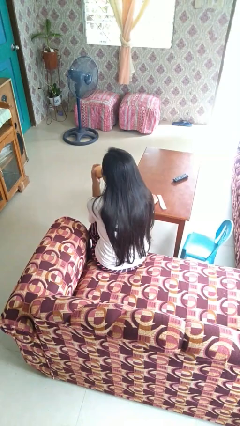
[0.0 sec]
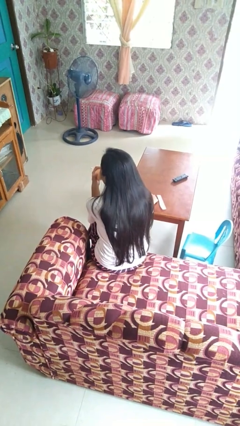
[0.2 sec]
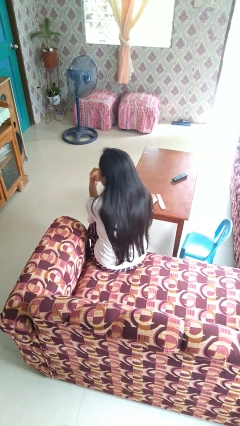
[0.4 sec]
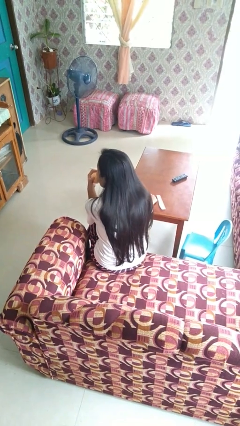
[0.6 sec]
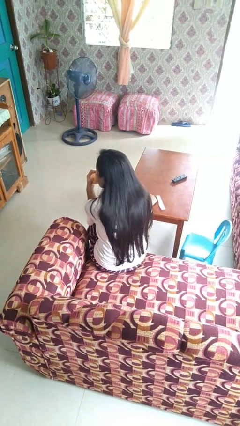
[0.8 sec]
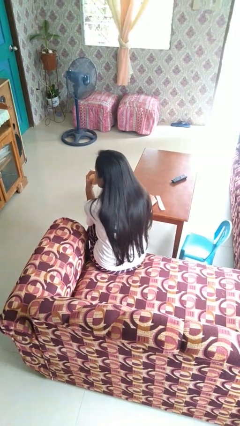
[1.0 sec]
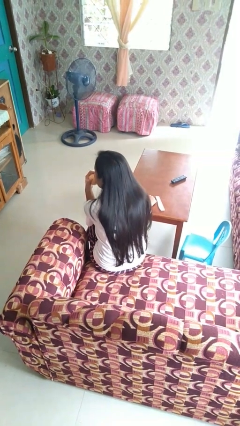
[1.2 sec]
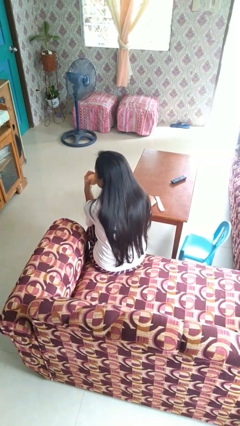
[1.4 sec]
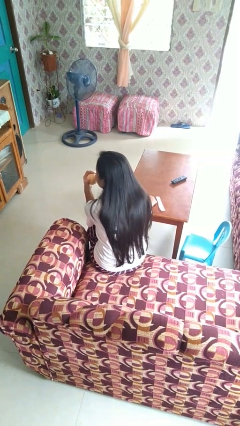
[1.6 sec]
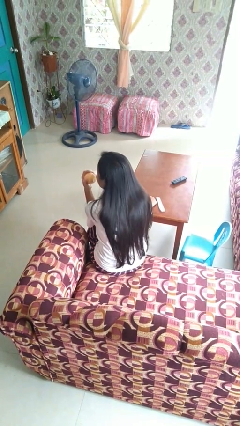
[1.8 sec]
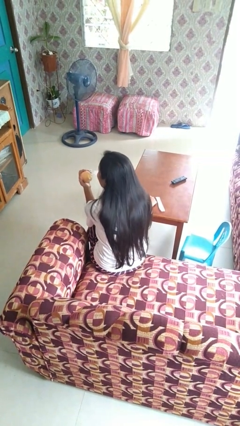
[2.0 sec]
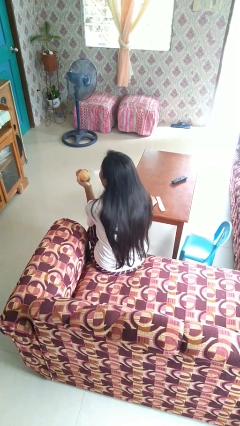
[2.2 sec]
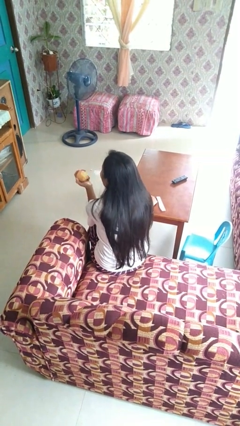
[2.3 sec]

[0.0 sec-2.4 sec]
person eats apple

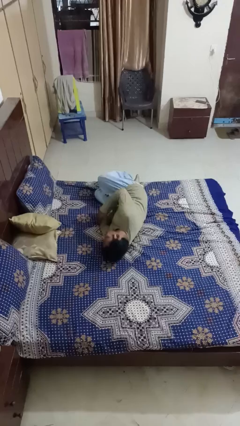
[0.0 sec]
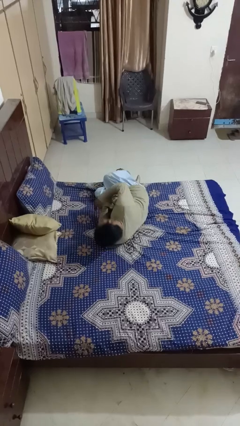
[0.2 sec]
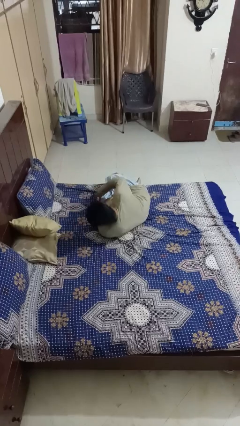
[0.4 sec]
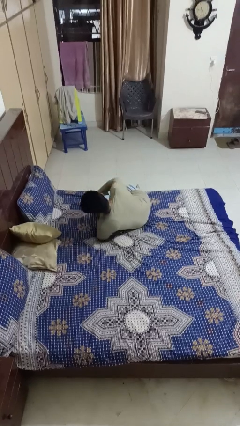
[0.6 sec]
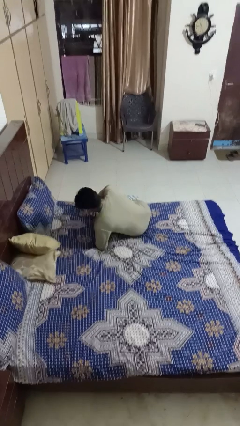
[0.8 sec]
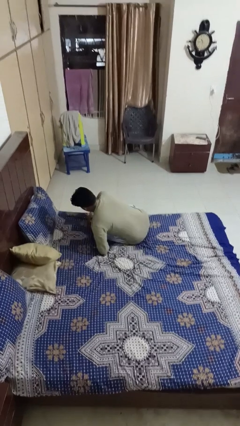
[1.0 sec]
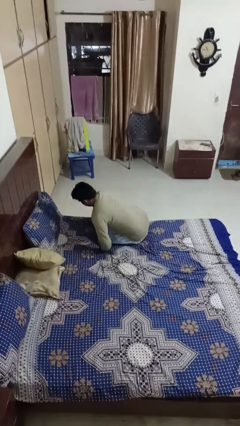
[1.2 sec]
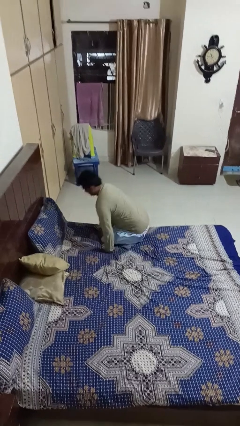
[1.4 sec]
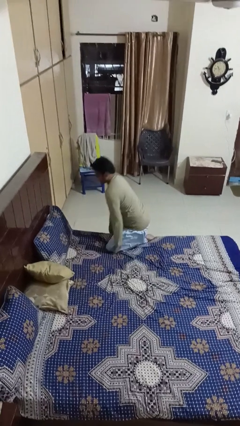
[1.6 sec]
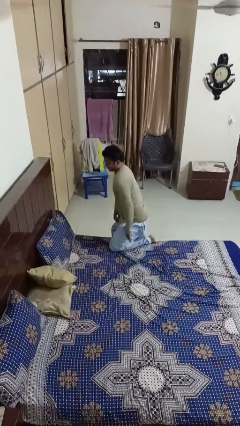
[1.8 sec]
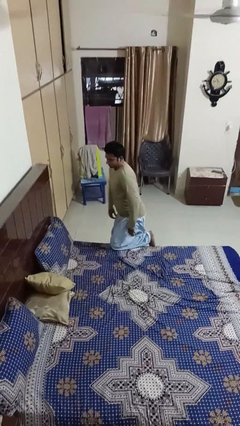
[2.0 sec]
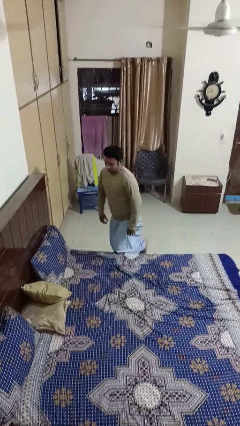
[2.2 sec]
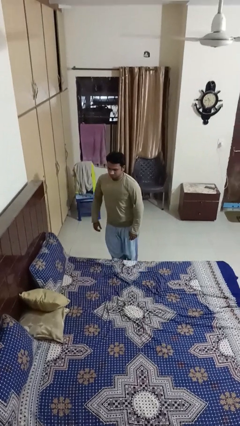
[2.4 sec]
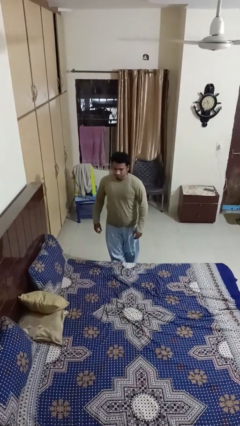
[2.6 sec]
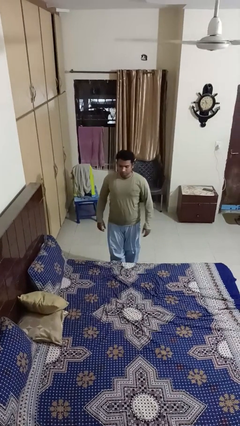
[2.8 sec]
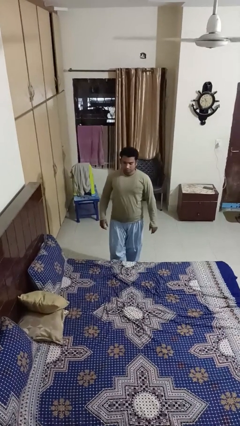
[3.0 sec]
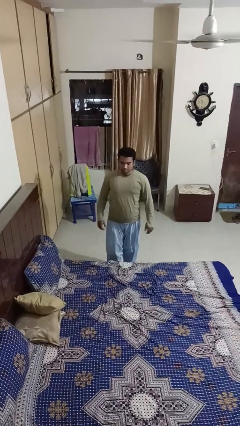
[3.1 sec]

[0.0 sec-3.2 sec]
person stands up

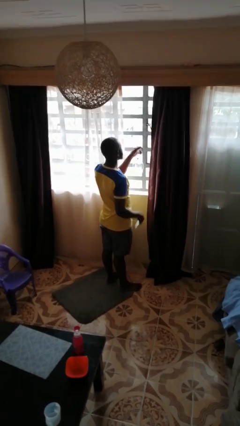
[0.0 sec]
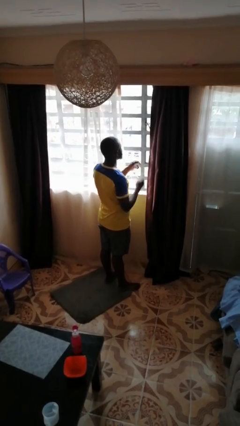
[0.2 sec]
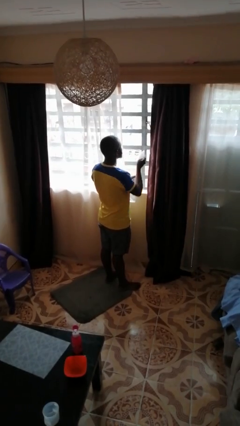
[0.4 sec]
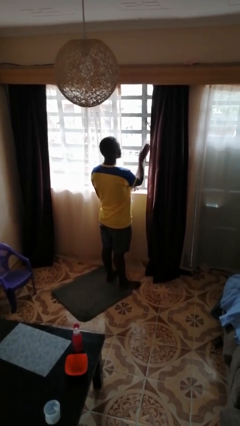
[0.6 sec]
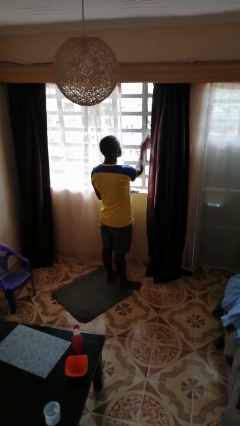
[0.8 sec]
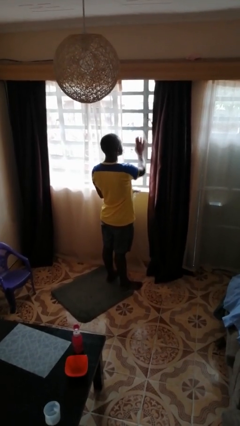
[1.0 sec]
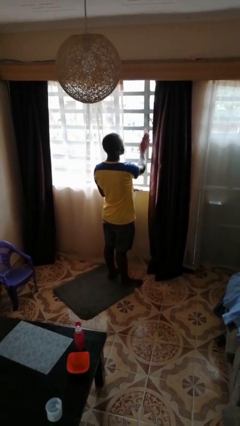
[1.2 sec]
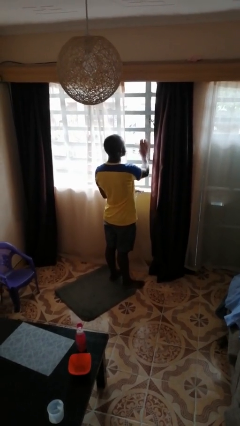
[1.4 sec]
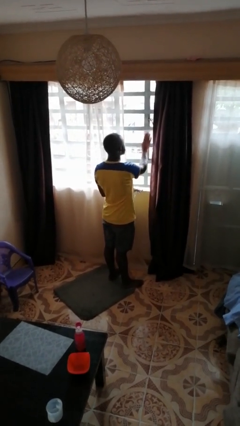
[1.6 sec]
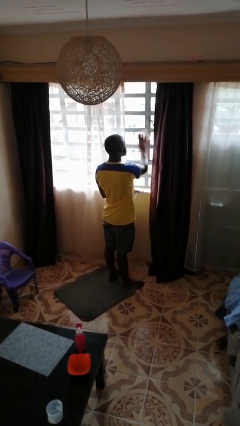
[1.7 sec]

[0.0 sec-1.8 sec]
person washes window

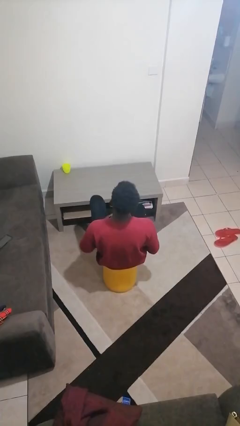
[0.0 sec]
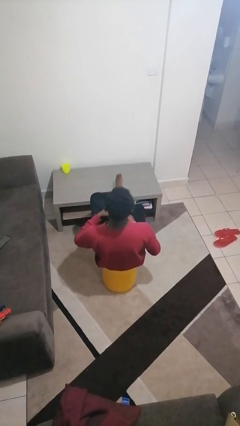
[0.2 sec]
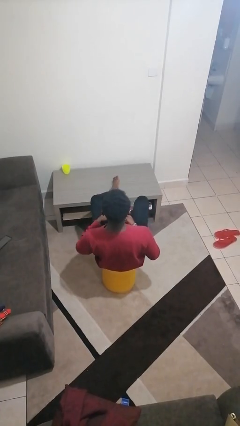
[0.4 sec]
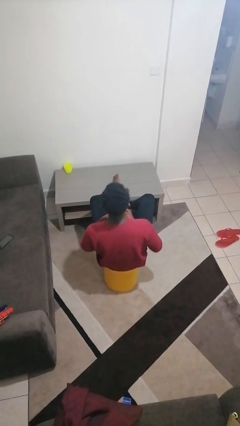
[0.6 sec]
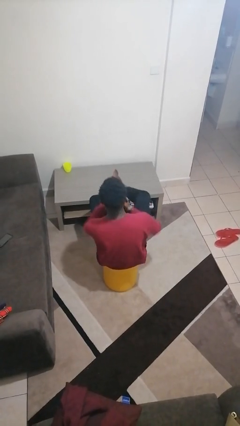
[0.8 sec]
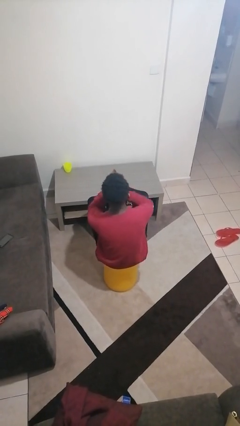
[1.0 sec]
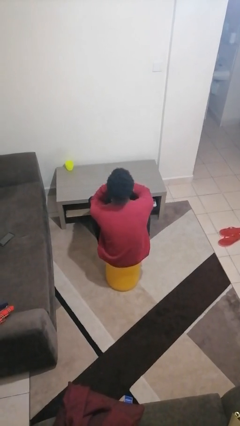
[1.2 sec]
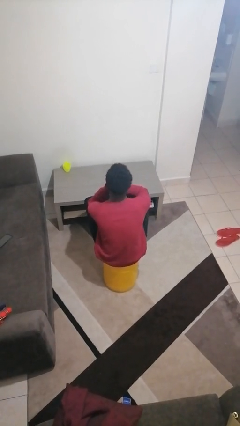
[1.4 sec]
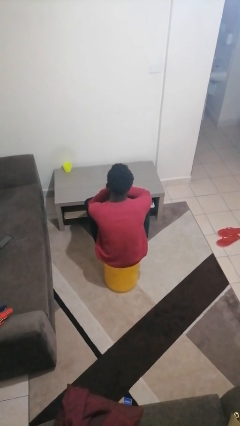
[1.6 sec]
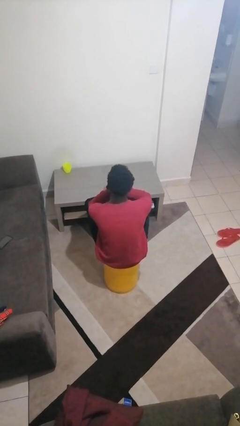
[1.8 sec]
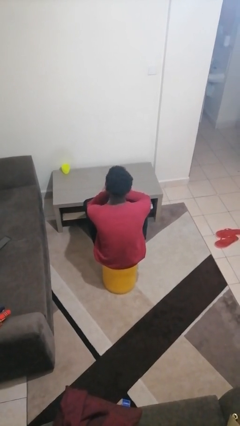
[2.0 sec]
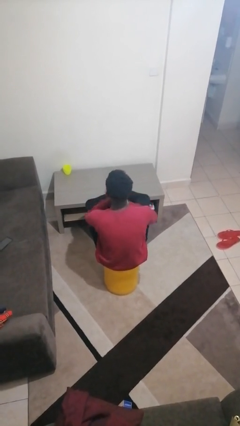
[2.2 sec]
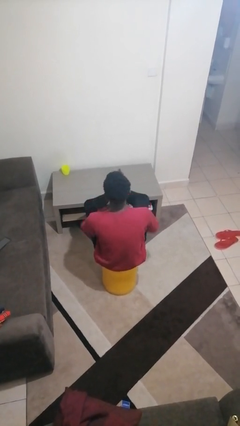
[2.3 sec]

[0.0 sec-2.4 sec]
person puts feet up

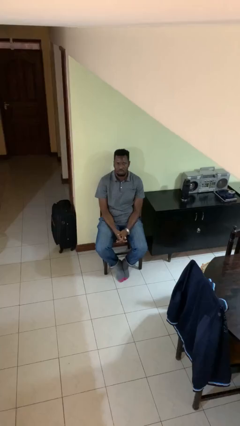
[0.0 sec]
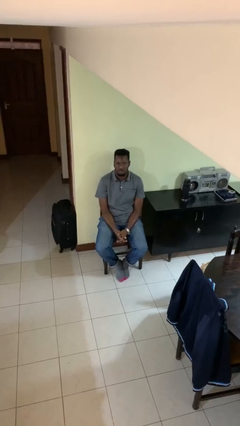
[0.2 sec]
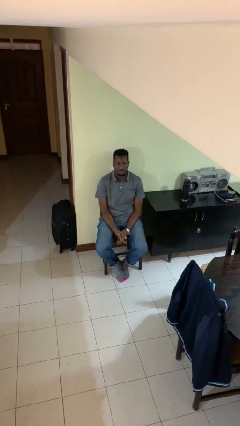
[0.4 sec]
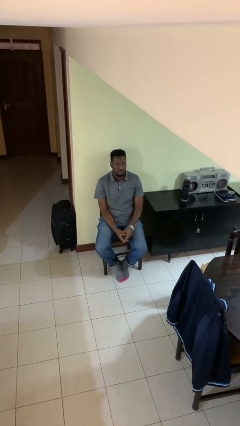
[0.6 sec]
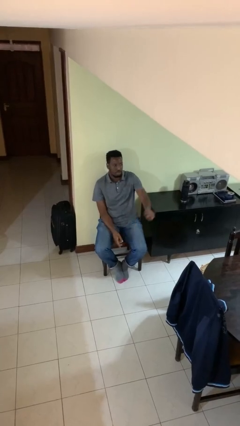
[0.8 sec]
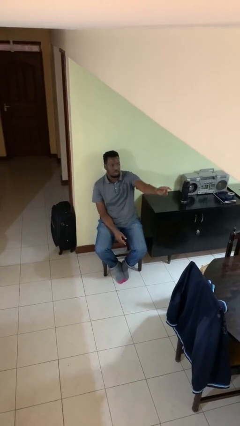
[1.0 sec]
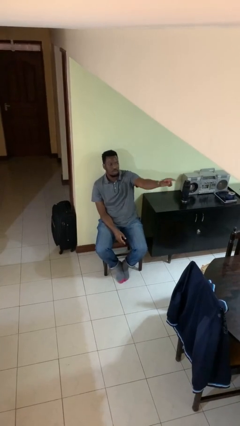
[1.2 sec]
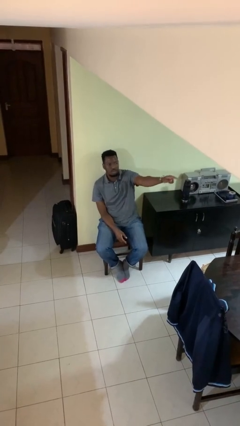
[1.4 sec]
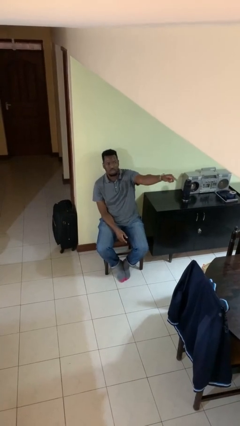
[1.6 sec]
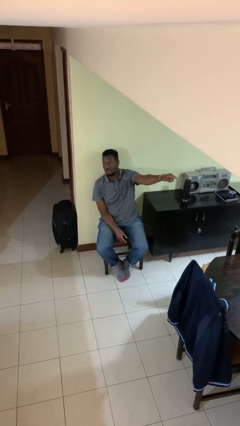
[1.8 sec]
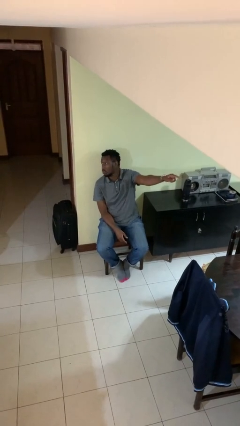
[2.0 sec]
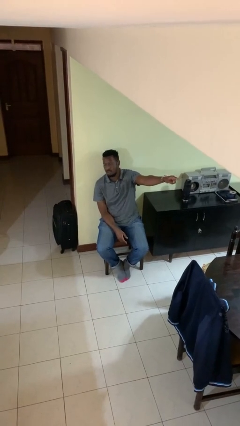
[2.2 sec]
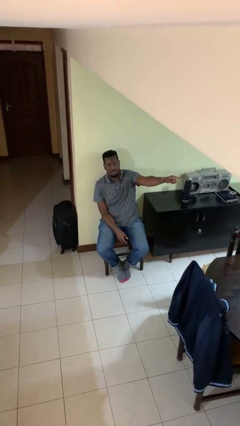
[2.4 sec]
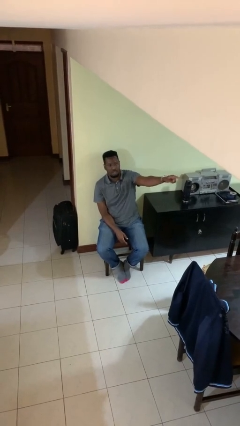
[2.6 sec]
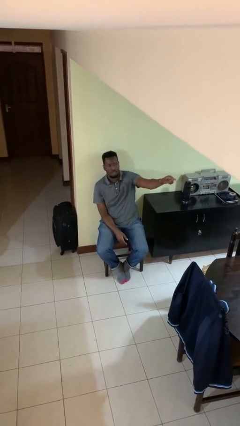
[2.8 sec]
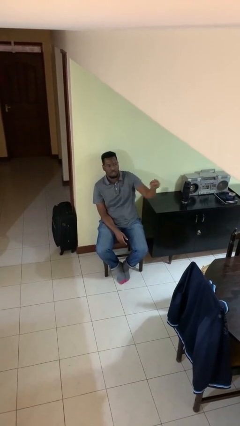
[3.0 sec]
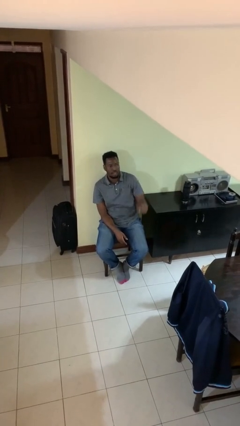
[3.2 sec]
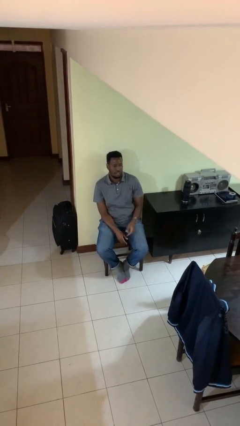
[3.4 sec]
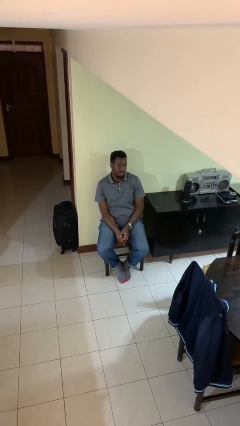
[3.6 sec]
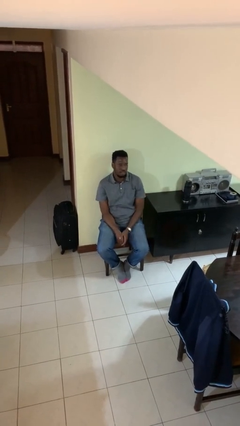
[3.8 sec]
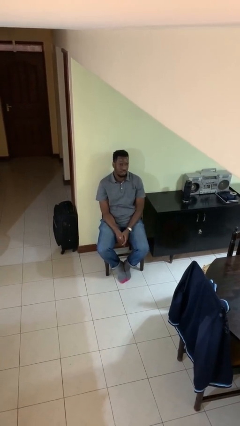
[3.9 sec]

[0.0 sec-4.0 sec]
person points at person

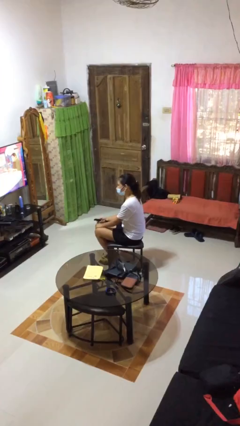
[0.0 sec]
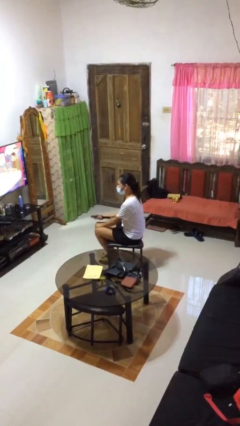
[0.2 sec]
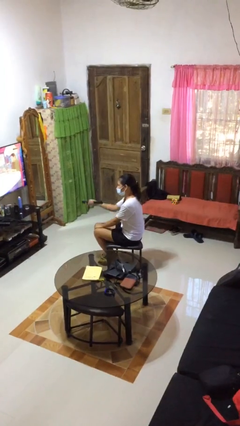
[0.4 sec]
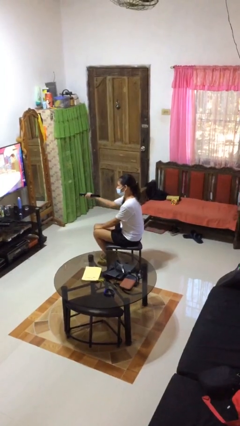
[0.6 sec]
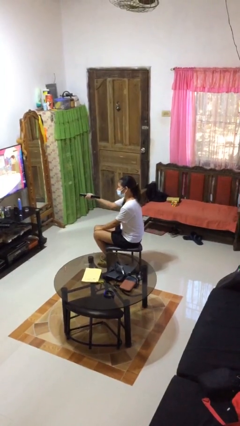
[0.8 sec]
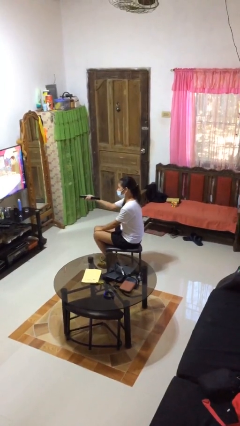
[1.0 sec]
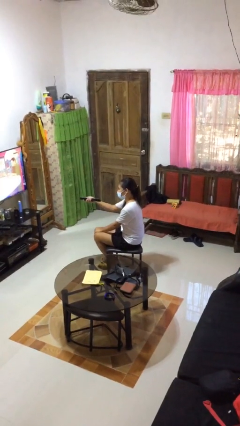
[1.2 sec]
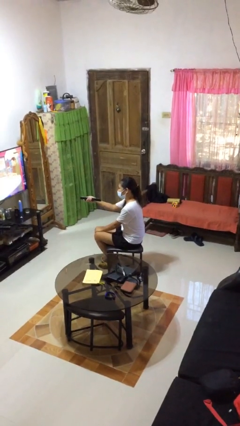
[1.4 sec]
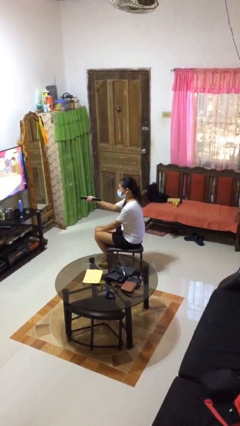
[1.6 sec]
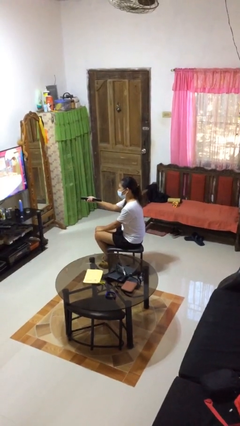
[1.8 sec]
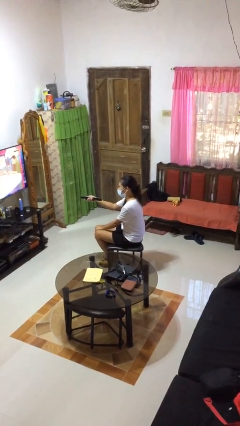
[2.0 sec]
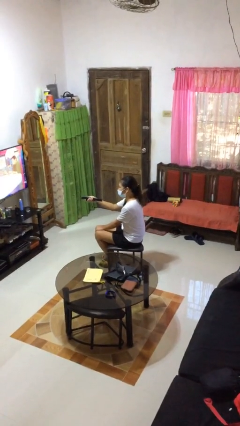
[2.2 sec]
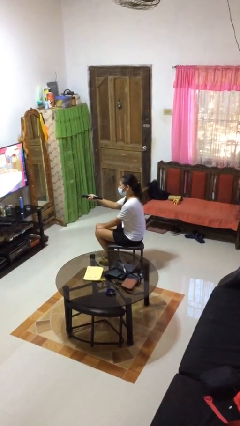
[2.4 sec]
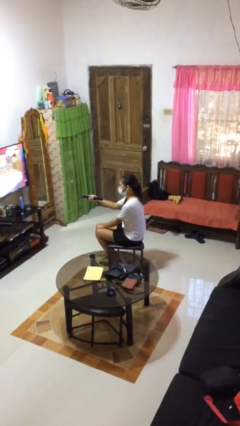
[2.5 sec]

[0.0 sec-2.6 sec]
person uses television remote

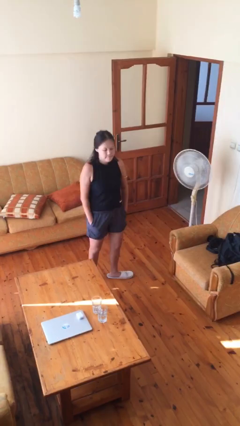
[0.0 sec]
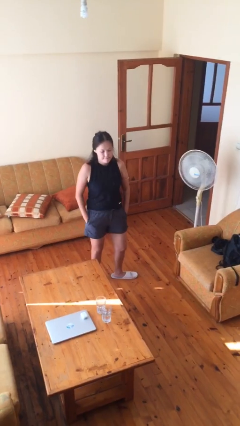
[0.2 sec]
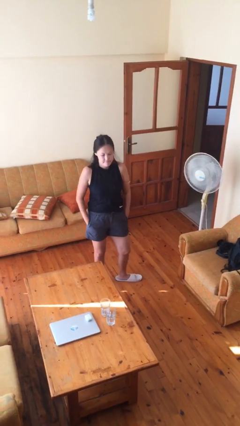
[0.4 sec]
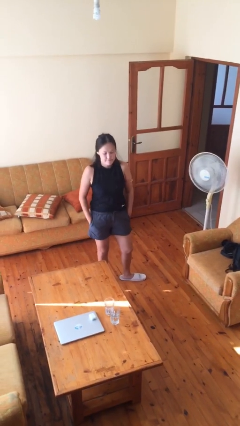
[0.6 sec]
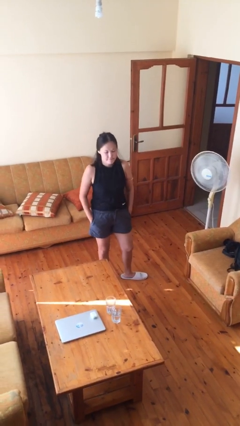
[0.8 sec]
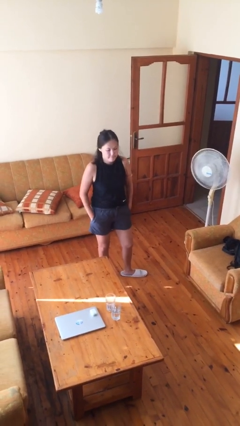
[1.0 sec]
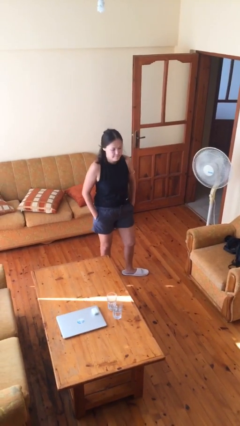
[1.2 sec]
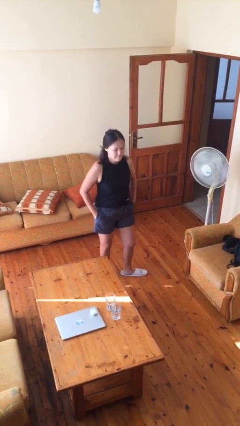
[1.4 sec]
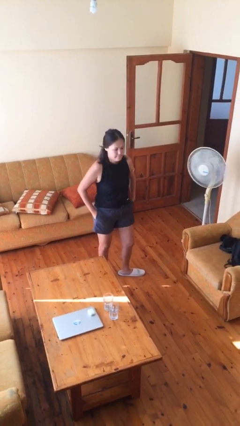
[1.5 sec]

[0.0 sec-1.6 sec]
person puts hands in back pockets
